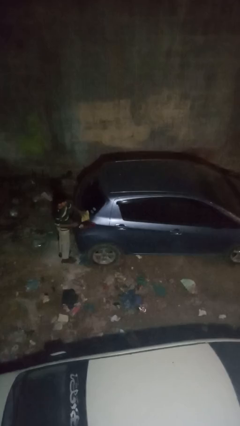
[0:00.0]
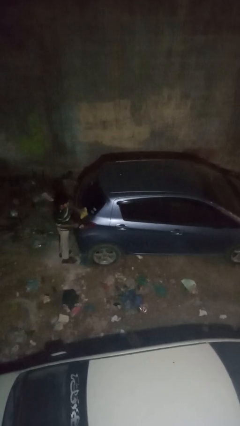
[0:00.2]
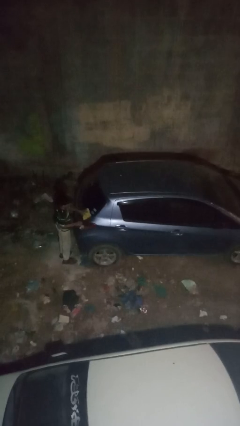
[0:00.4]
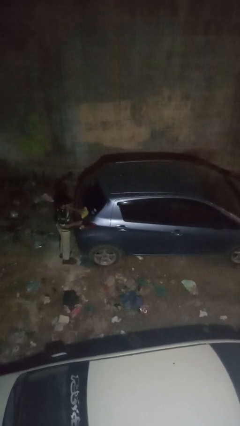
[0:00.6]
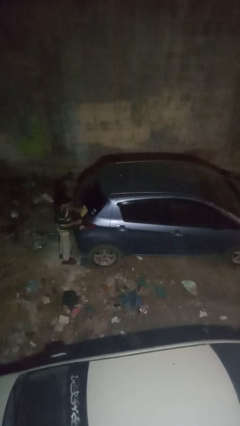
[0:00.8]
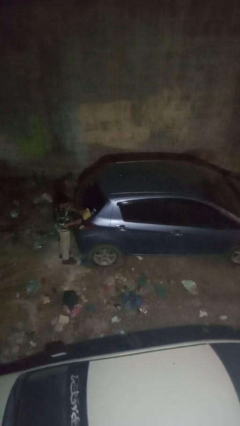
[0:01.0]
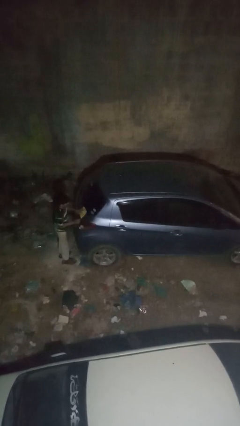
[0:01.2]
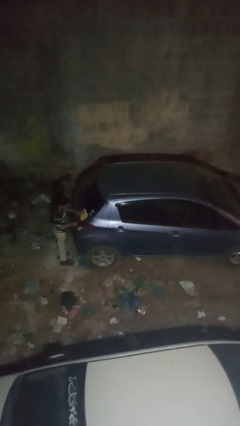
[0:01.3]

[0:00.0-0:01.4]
person polishes car with rag

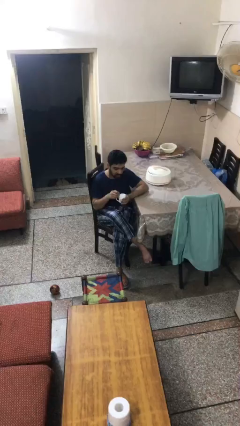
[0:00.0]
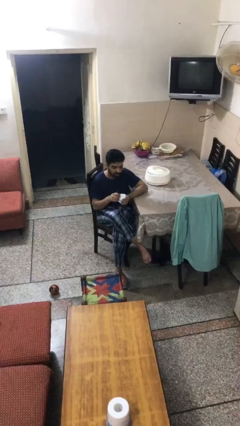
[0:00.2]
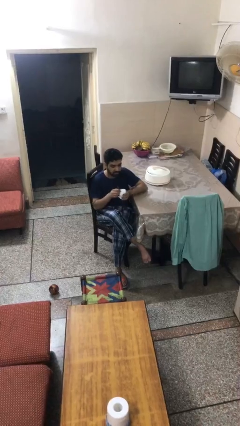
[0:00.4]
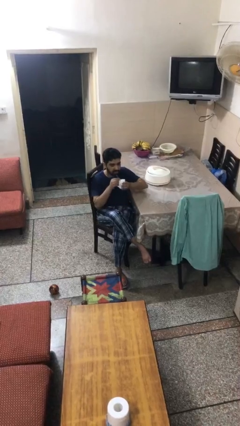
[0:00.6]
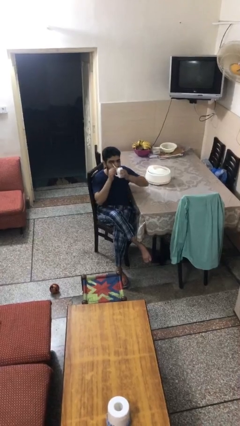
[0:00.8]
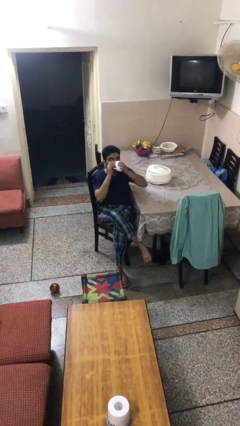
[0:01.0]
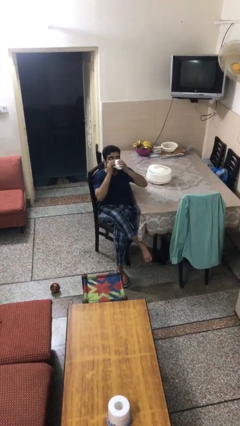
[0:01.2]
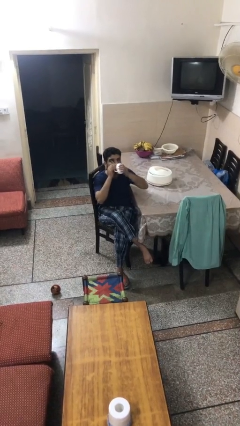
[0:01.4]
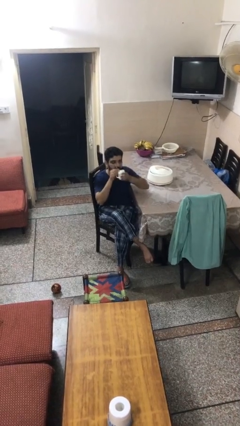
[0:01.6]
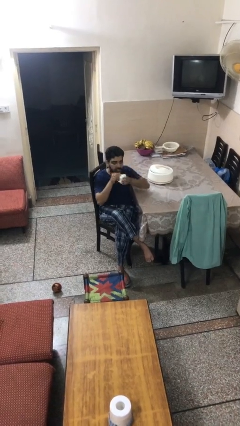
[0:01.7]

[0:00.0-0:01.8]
person drinks from mug

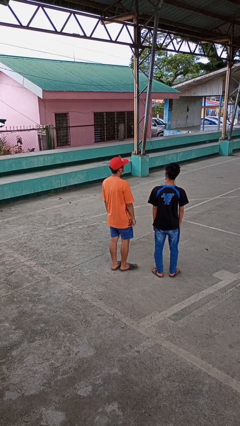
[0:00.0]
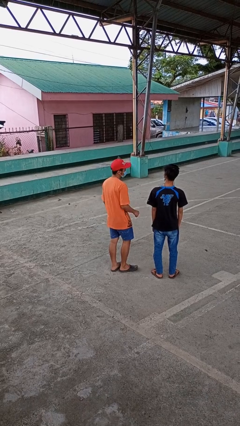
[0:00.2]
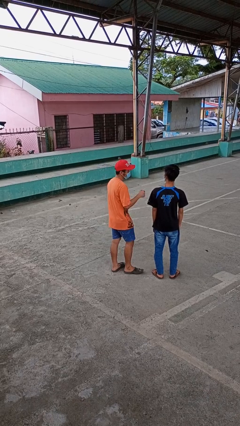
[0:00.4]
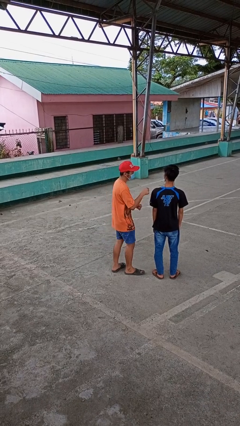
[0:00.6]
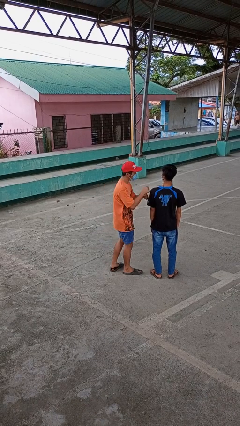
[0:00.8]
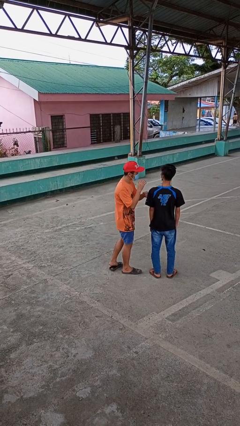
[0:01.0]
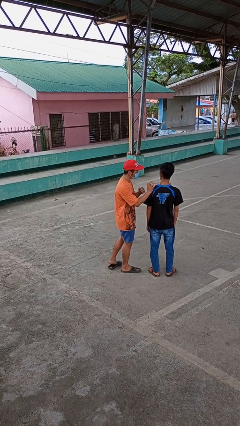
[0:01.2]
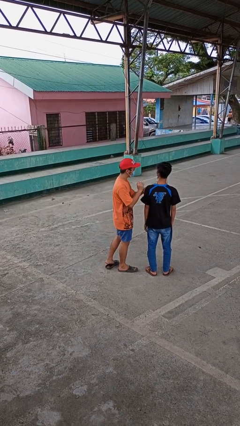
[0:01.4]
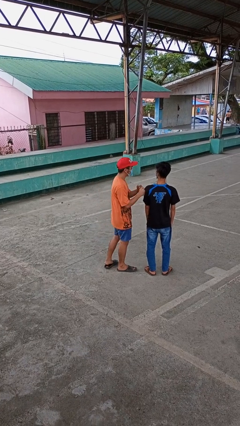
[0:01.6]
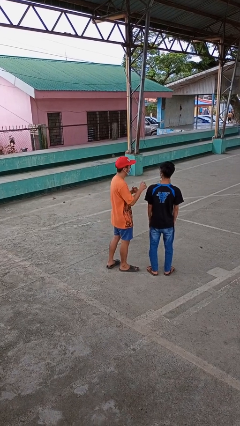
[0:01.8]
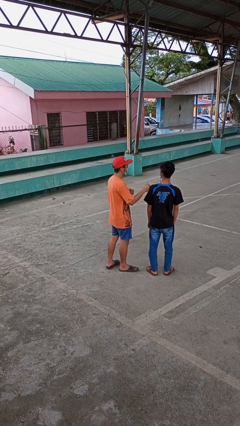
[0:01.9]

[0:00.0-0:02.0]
person pounds shoulders of person

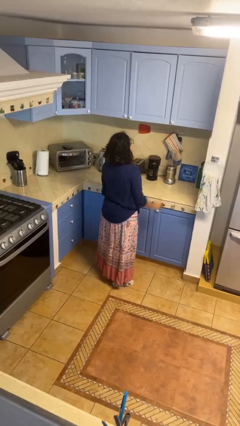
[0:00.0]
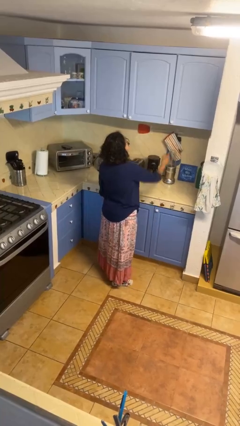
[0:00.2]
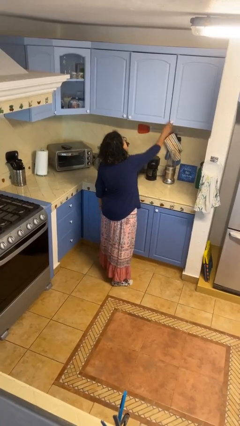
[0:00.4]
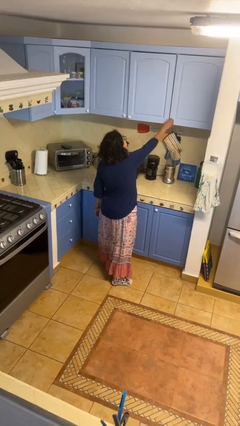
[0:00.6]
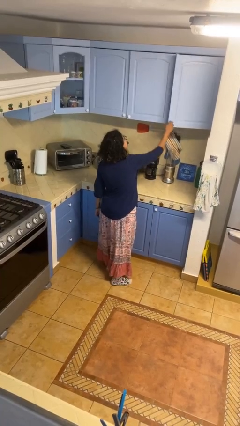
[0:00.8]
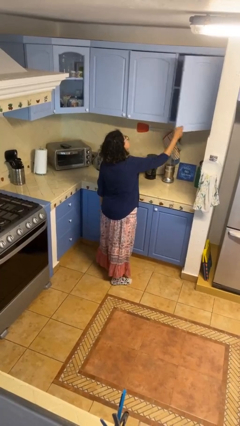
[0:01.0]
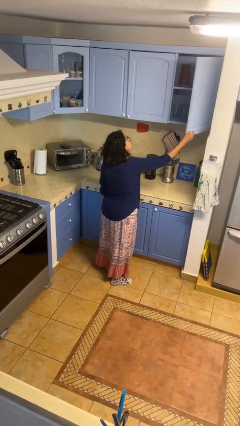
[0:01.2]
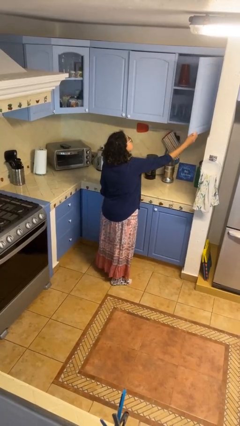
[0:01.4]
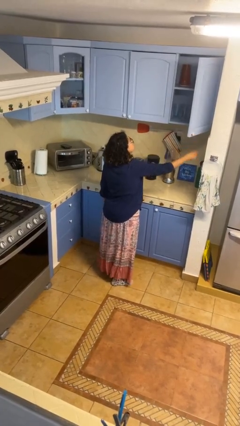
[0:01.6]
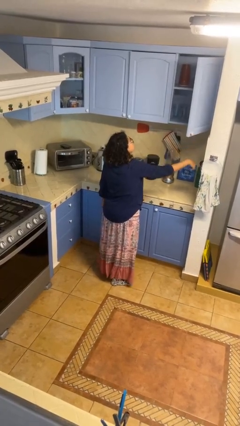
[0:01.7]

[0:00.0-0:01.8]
person opens cabinet

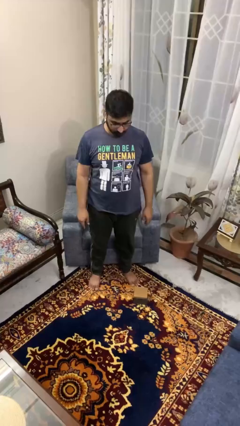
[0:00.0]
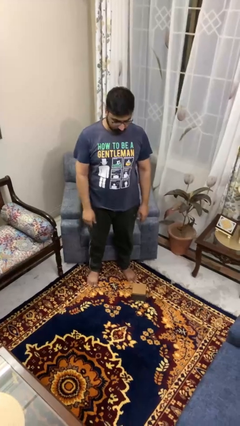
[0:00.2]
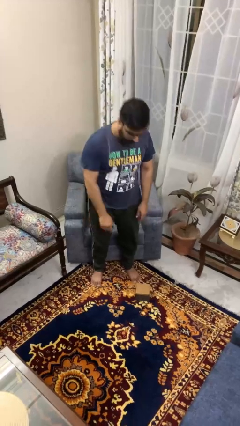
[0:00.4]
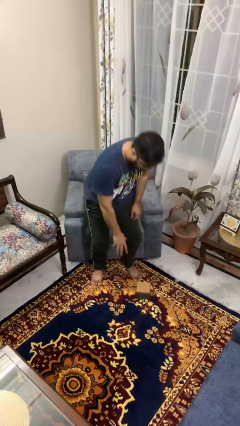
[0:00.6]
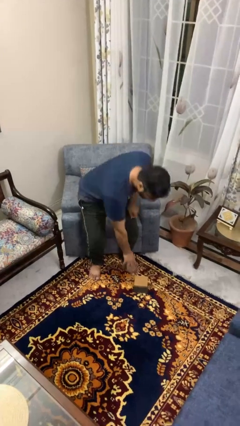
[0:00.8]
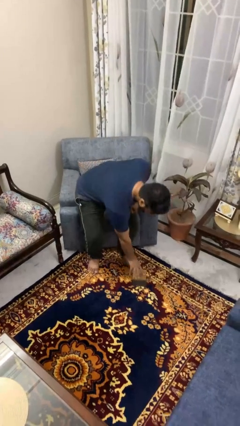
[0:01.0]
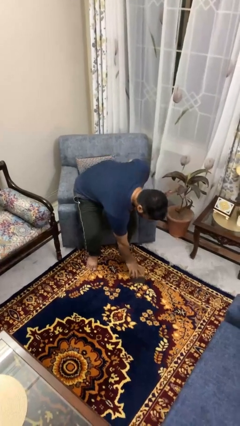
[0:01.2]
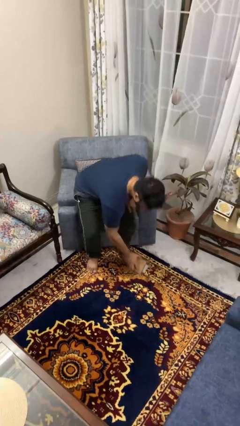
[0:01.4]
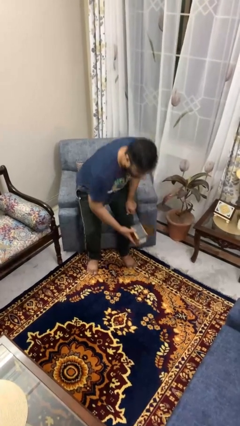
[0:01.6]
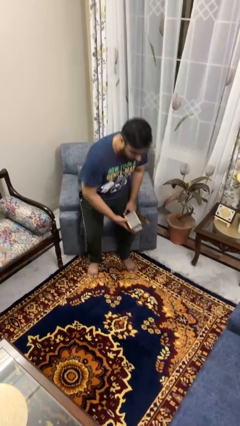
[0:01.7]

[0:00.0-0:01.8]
person picks up object from floor

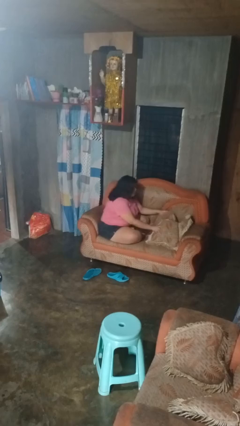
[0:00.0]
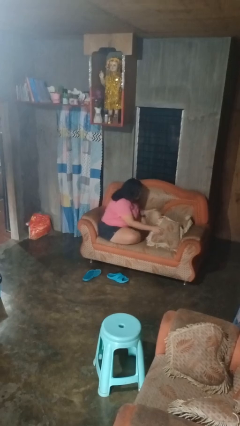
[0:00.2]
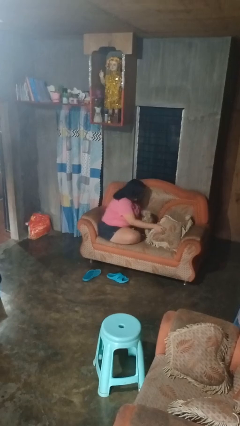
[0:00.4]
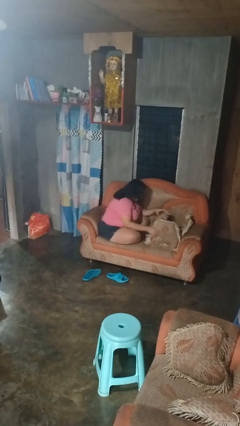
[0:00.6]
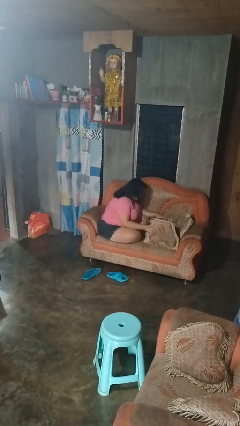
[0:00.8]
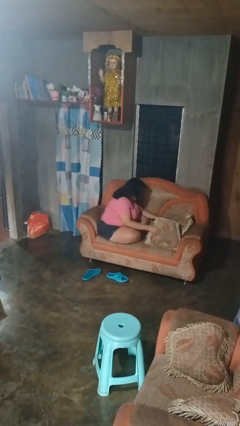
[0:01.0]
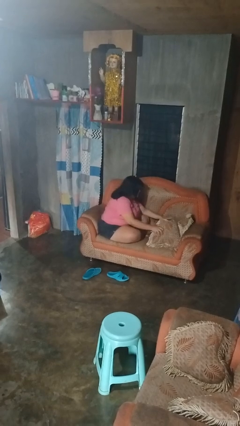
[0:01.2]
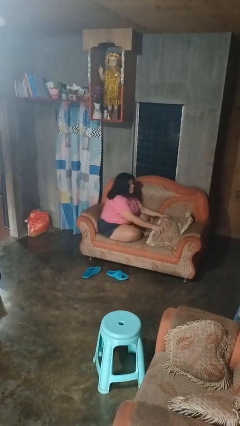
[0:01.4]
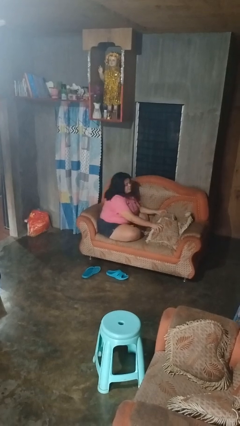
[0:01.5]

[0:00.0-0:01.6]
person searches in couch

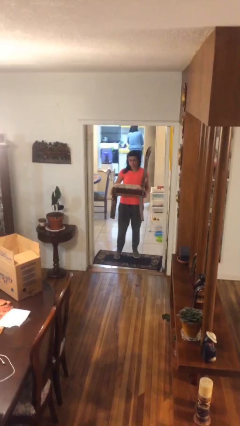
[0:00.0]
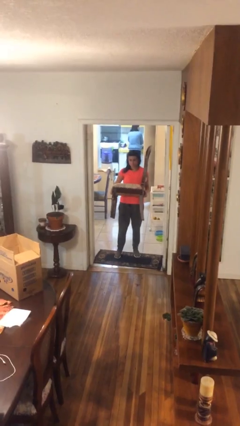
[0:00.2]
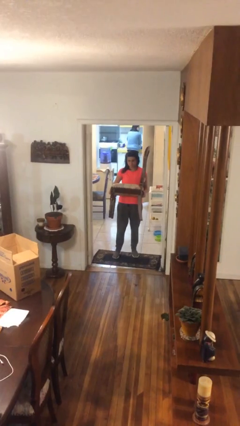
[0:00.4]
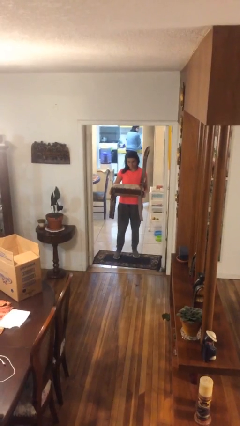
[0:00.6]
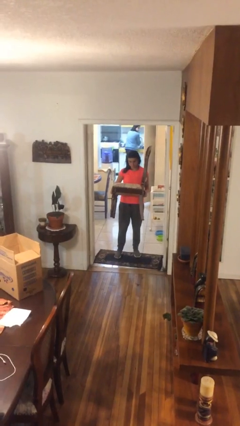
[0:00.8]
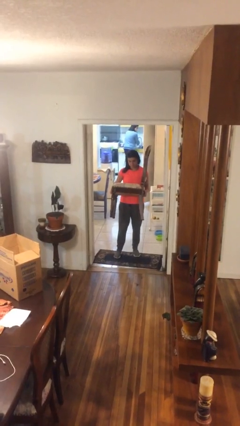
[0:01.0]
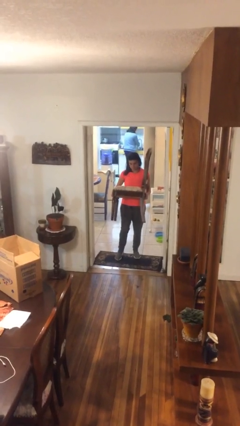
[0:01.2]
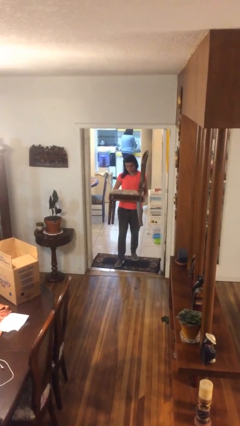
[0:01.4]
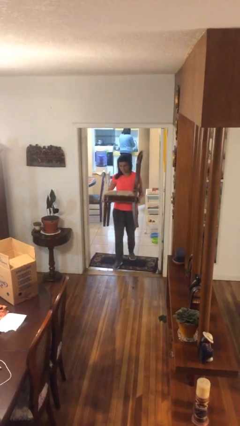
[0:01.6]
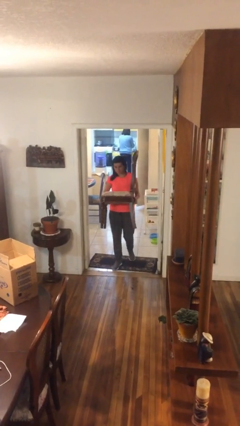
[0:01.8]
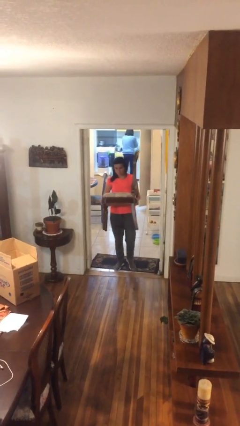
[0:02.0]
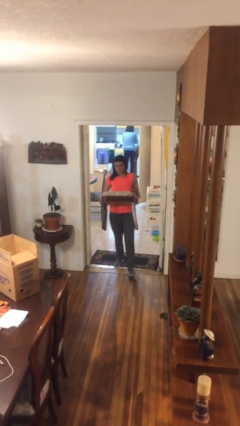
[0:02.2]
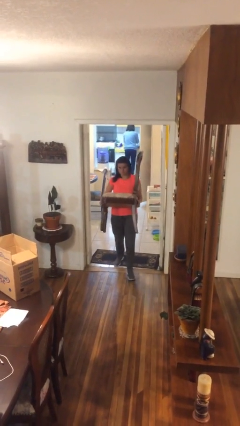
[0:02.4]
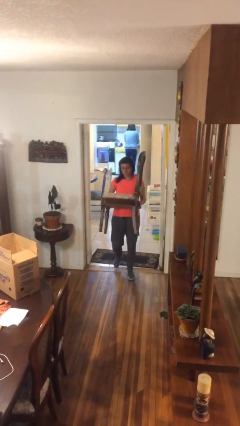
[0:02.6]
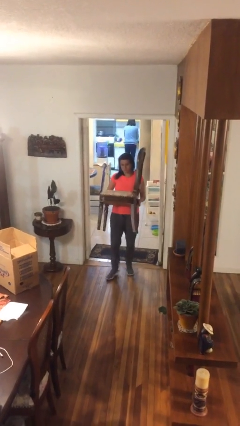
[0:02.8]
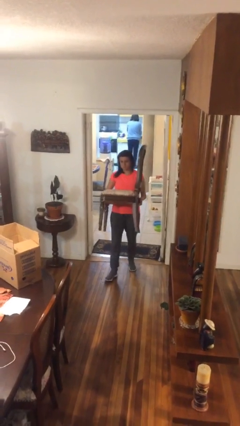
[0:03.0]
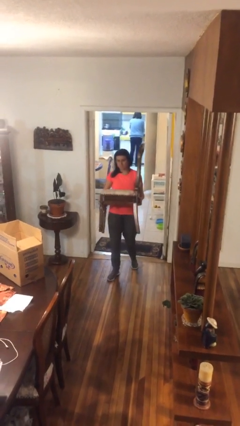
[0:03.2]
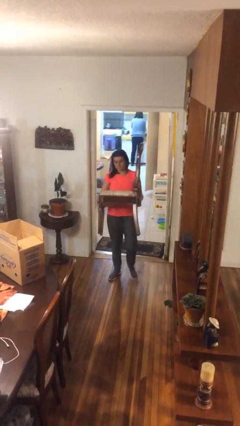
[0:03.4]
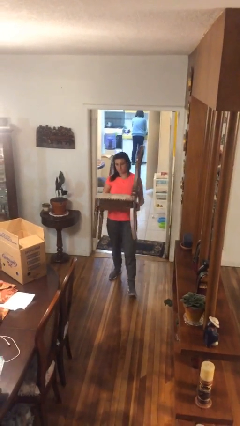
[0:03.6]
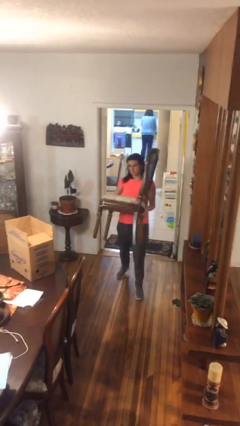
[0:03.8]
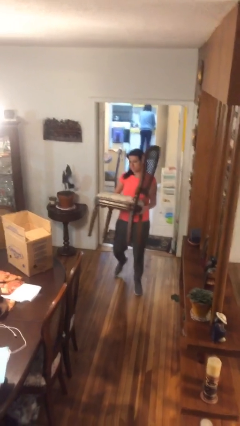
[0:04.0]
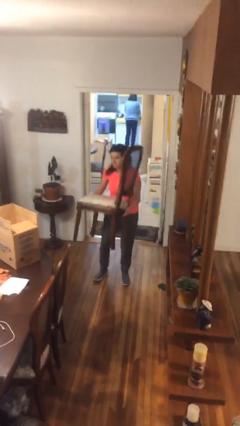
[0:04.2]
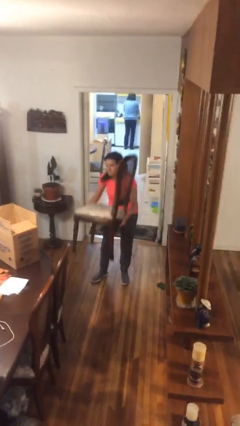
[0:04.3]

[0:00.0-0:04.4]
person carries heavy object

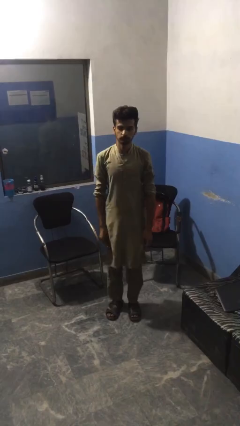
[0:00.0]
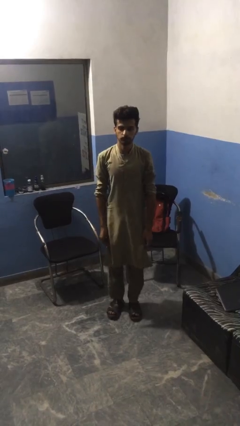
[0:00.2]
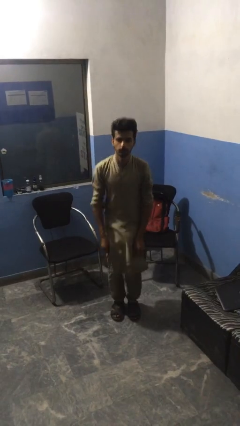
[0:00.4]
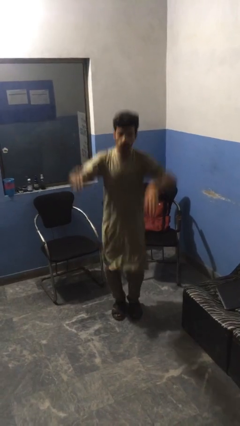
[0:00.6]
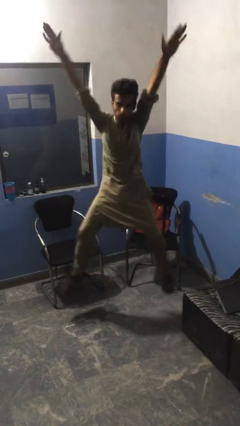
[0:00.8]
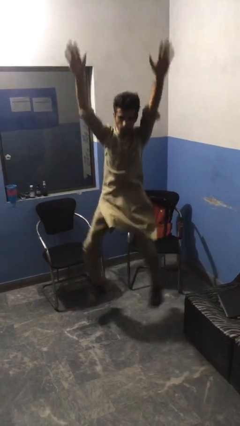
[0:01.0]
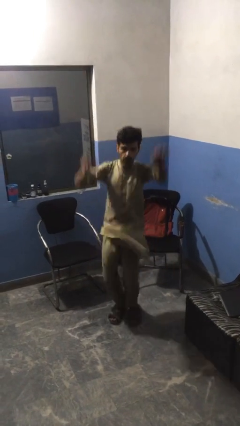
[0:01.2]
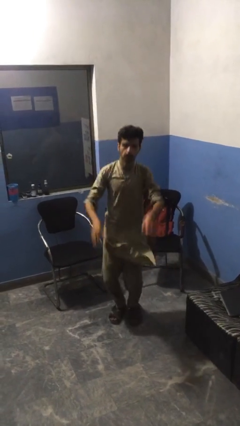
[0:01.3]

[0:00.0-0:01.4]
person exercises with jumping jacks

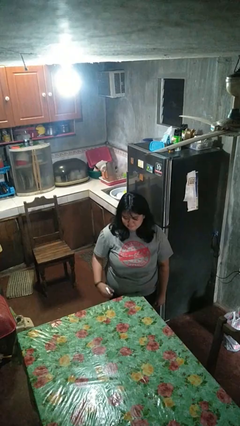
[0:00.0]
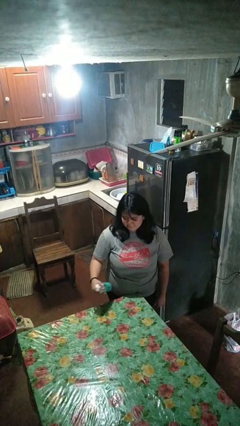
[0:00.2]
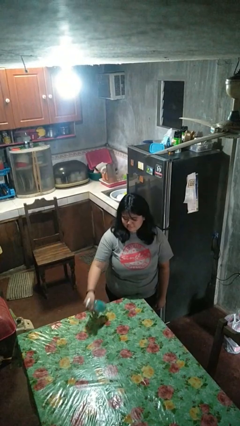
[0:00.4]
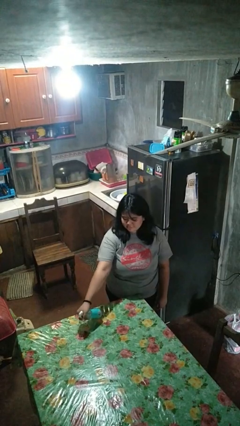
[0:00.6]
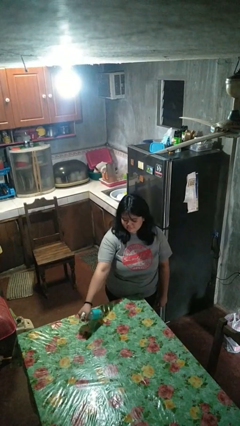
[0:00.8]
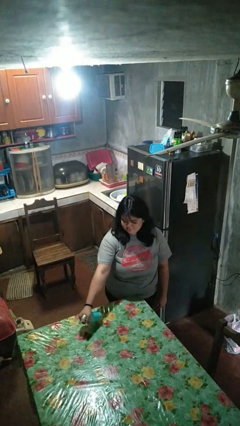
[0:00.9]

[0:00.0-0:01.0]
person sprays from bottle
